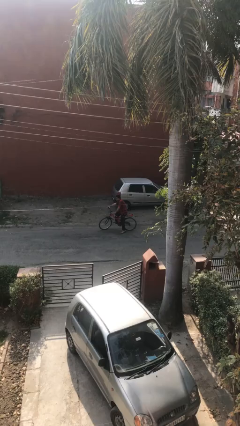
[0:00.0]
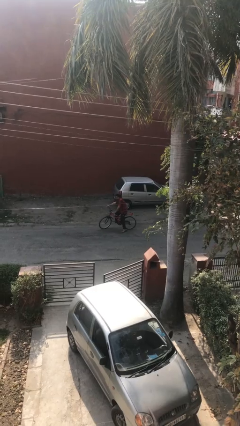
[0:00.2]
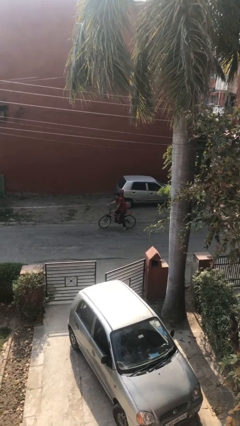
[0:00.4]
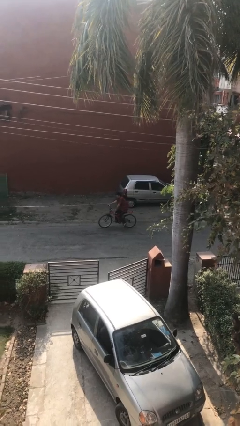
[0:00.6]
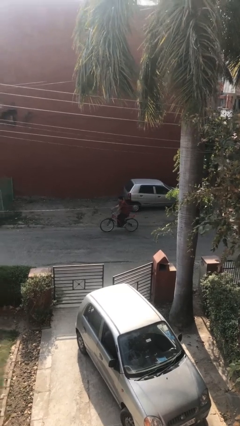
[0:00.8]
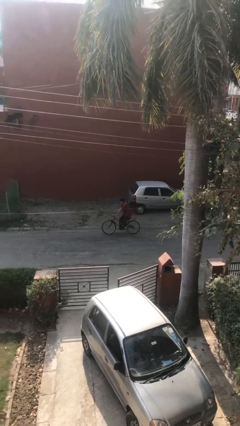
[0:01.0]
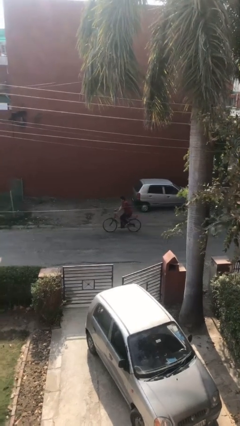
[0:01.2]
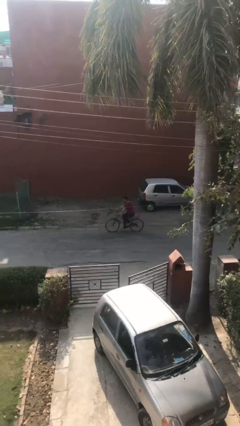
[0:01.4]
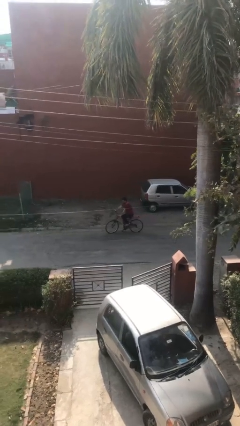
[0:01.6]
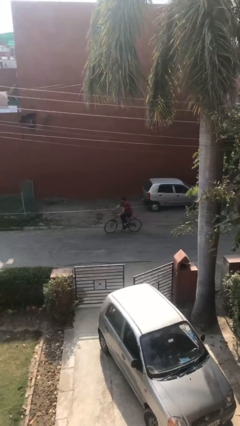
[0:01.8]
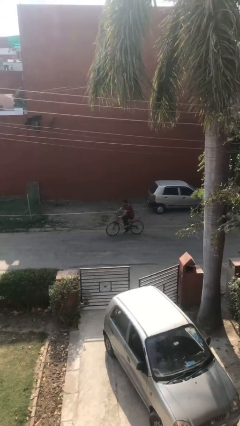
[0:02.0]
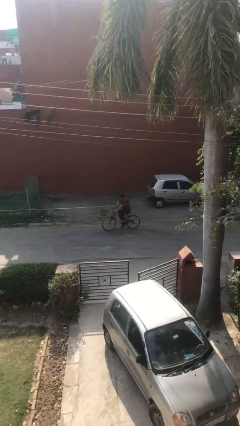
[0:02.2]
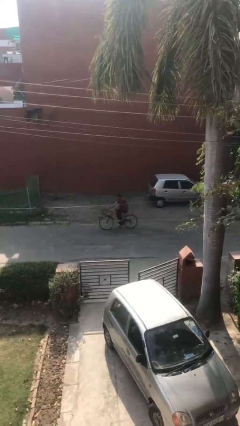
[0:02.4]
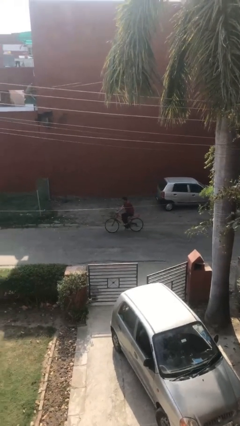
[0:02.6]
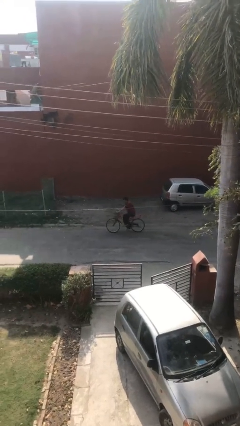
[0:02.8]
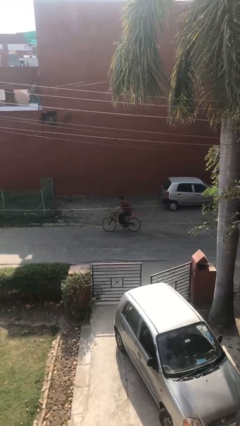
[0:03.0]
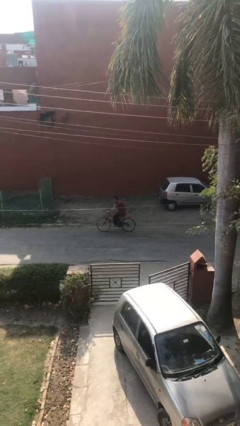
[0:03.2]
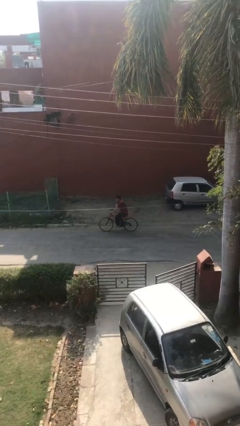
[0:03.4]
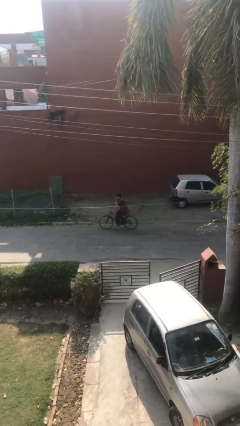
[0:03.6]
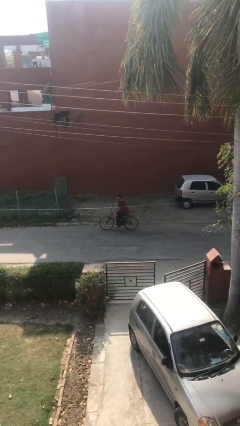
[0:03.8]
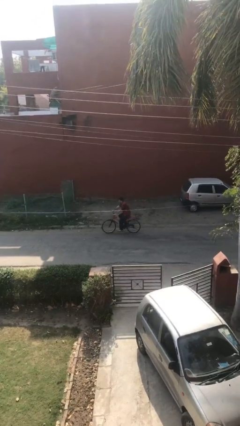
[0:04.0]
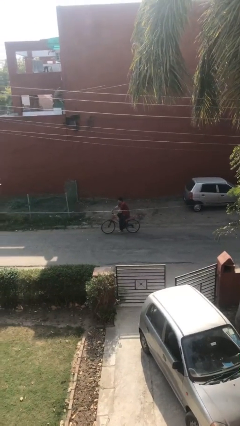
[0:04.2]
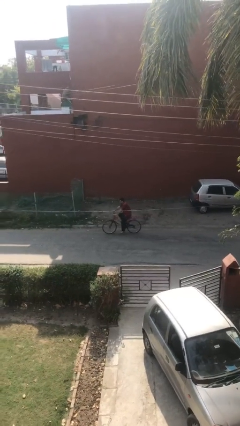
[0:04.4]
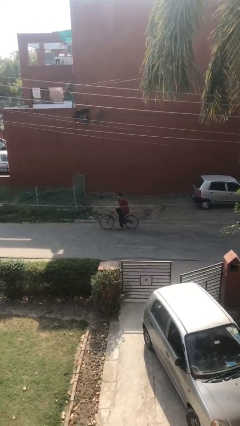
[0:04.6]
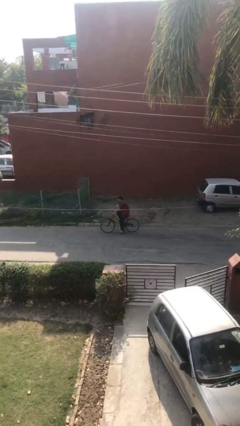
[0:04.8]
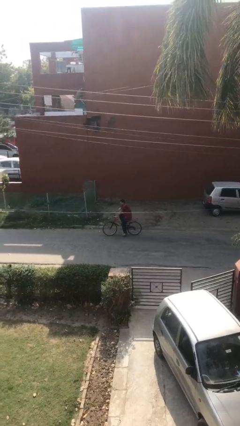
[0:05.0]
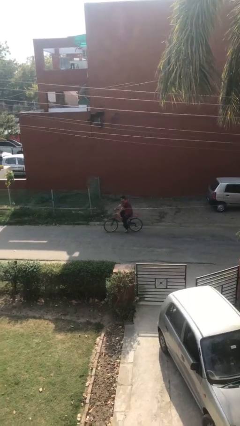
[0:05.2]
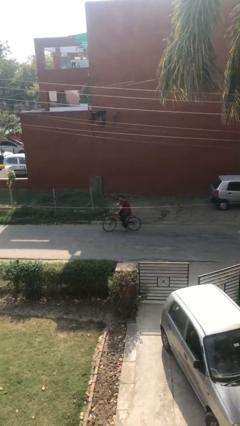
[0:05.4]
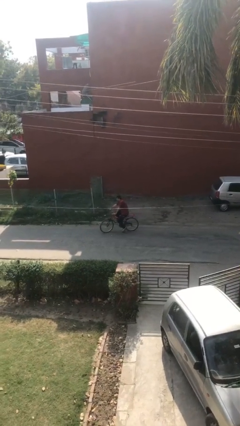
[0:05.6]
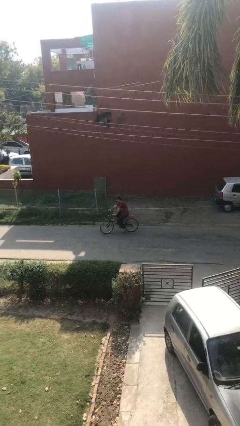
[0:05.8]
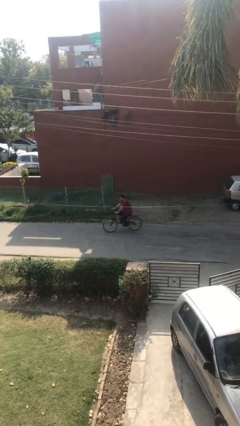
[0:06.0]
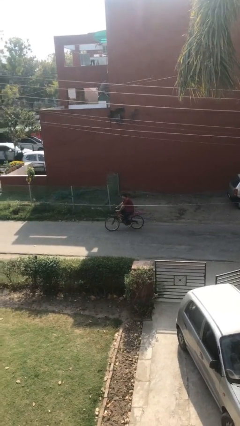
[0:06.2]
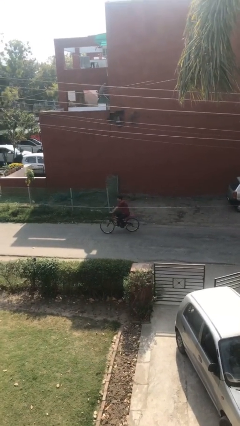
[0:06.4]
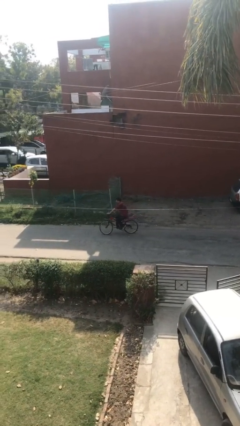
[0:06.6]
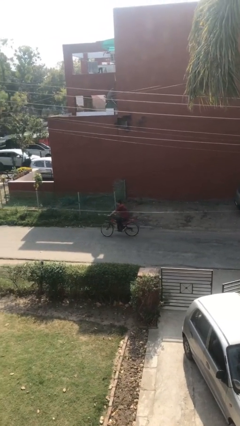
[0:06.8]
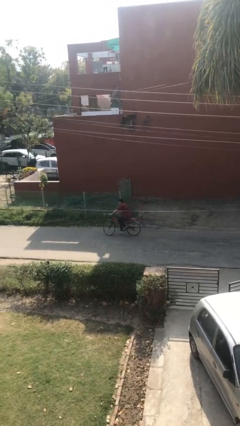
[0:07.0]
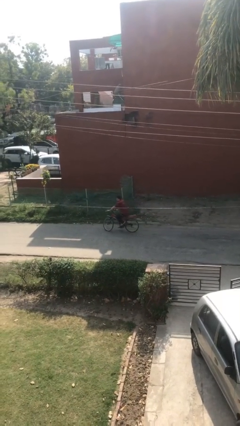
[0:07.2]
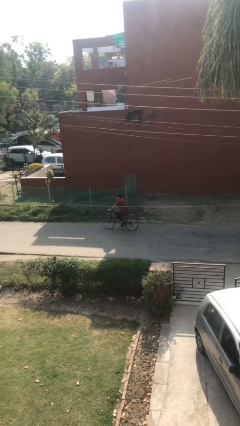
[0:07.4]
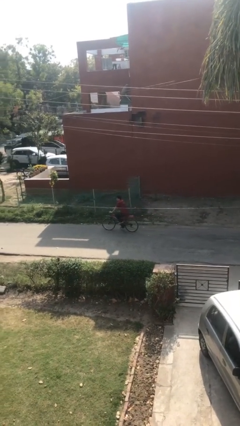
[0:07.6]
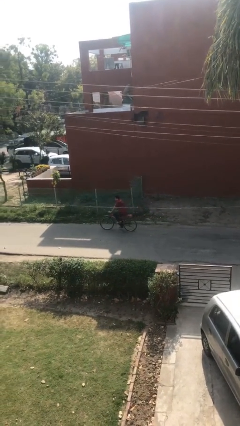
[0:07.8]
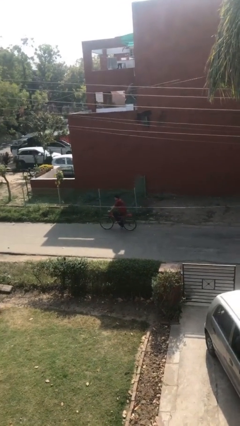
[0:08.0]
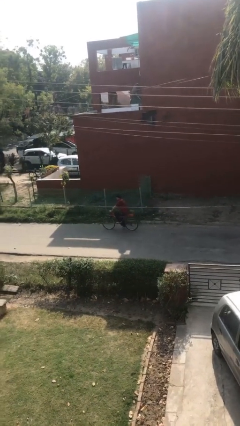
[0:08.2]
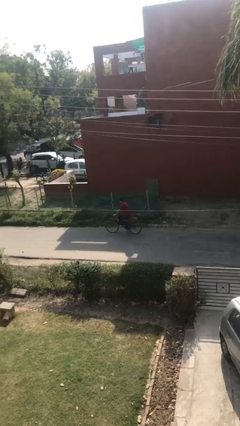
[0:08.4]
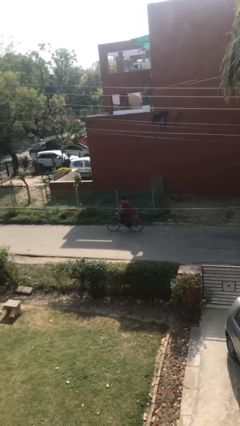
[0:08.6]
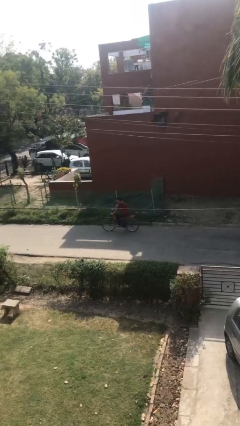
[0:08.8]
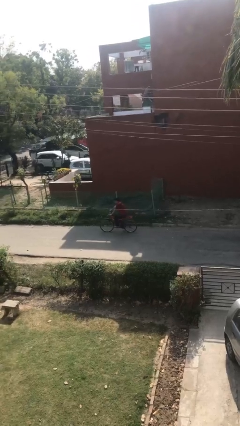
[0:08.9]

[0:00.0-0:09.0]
person rides bicycle

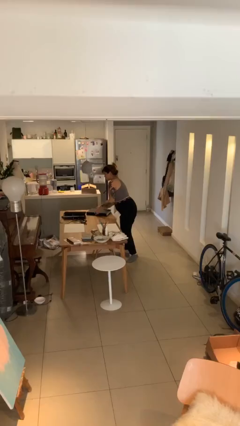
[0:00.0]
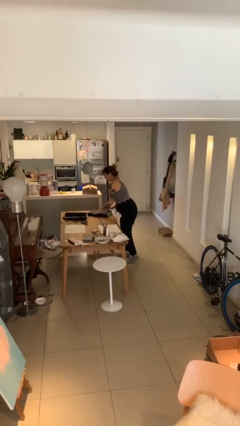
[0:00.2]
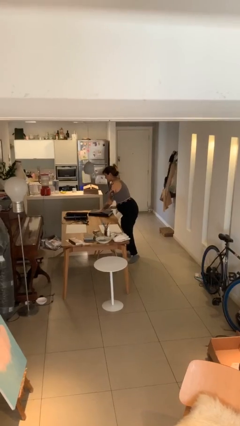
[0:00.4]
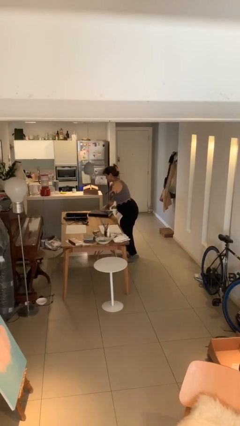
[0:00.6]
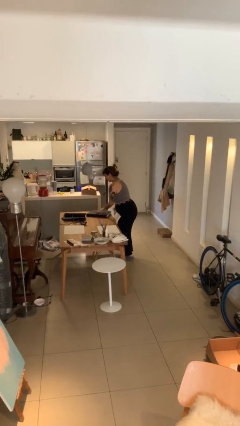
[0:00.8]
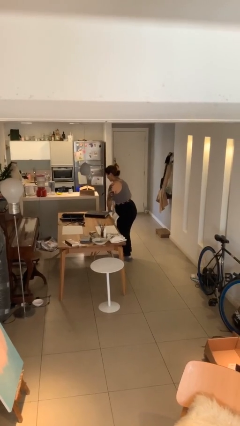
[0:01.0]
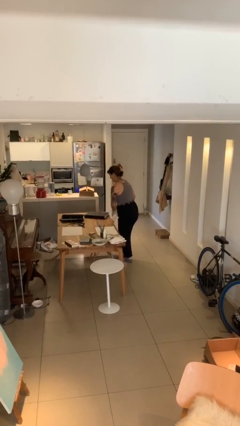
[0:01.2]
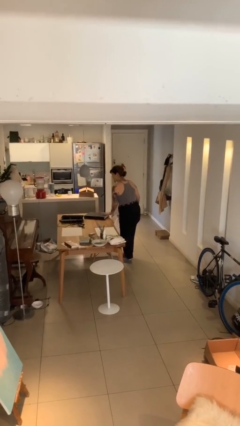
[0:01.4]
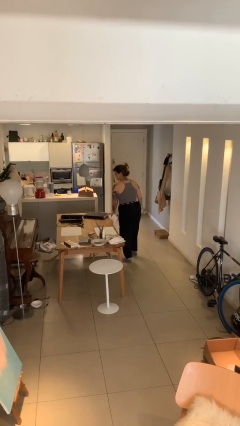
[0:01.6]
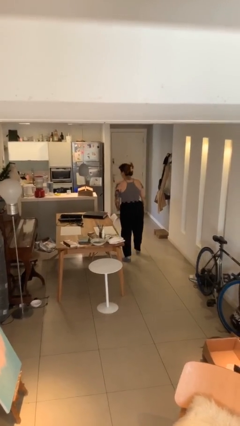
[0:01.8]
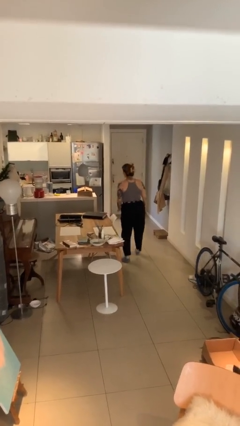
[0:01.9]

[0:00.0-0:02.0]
person puts down object on table

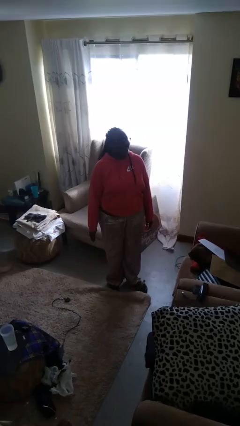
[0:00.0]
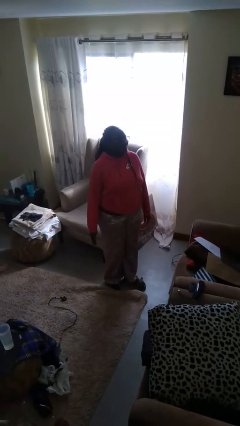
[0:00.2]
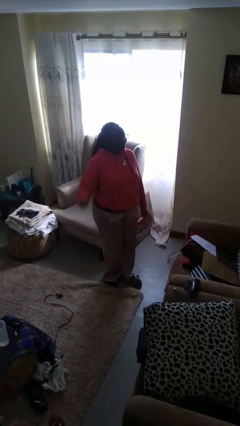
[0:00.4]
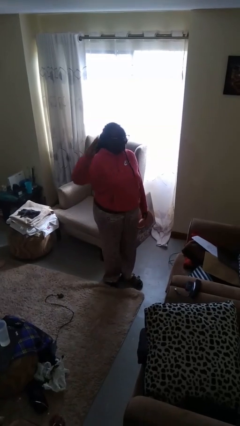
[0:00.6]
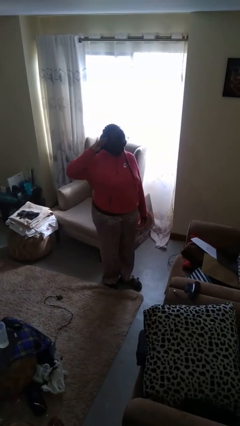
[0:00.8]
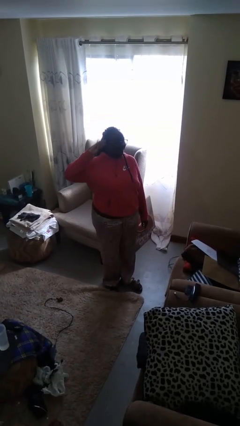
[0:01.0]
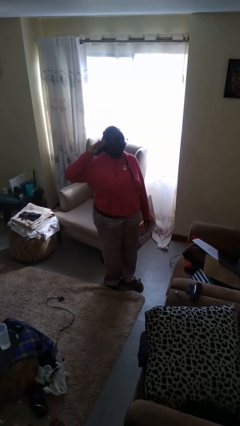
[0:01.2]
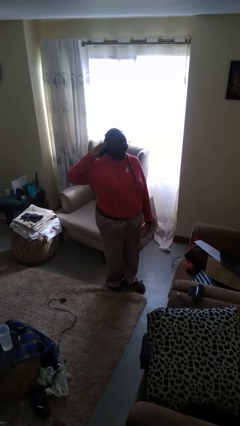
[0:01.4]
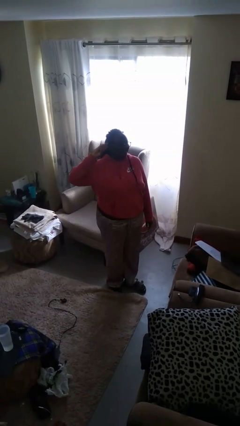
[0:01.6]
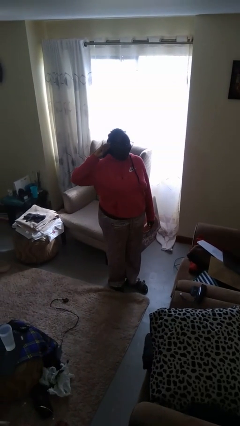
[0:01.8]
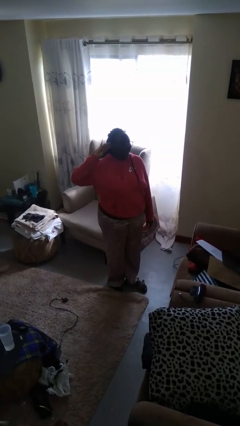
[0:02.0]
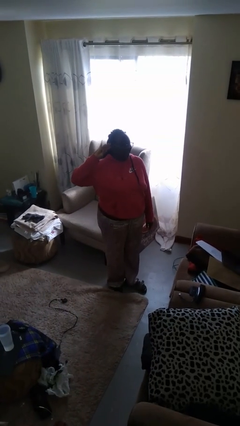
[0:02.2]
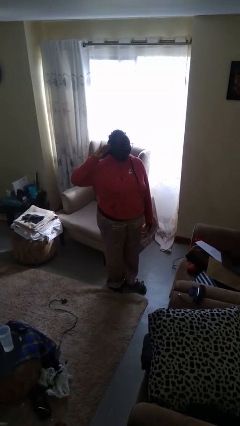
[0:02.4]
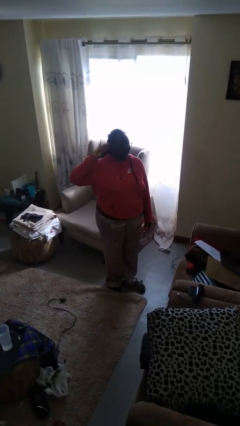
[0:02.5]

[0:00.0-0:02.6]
person salutes

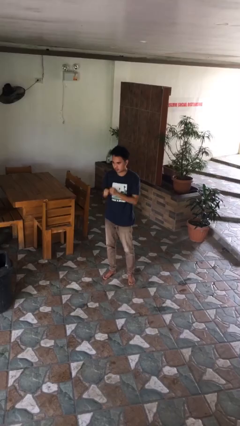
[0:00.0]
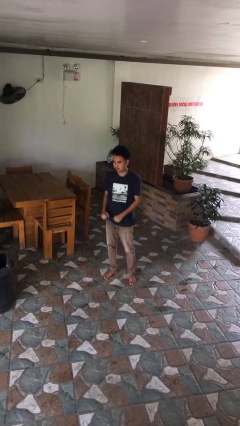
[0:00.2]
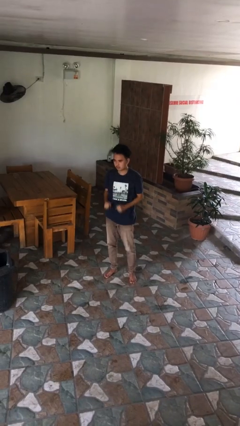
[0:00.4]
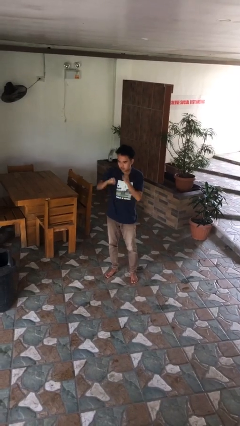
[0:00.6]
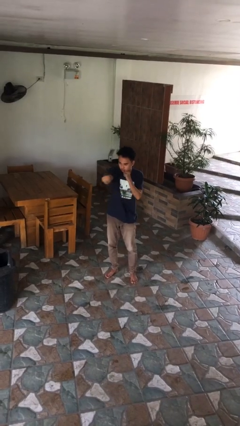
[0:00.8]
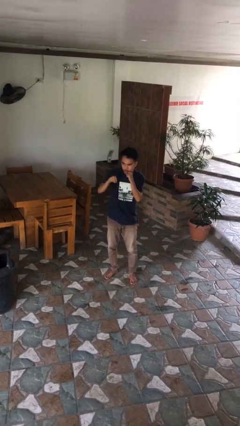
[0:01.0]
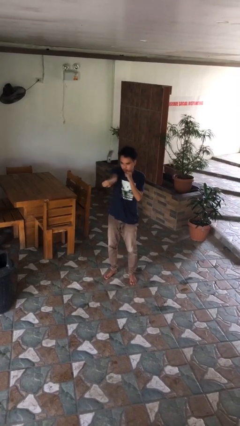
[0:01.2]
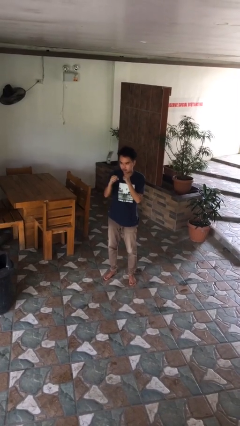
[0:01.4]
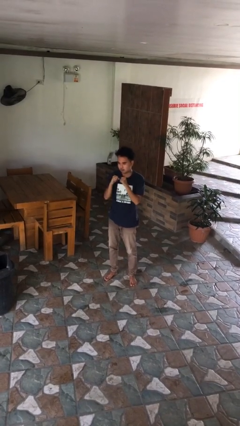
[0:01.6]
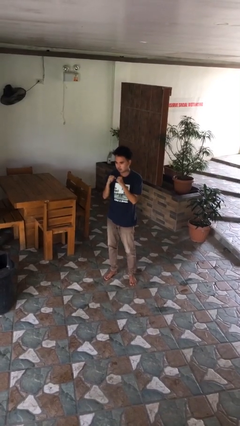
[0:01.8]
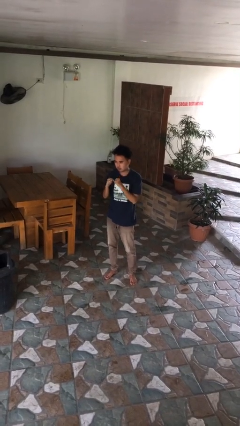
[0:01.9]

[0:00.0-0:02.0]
person punches

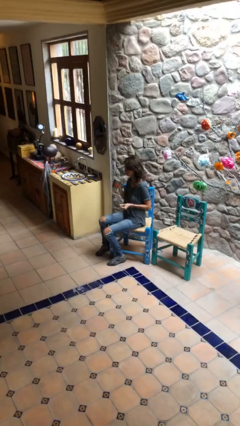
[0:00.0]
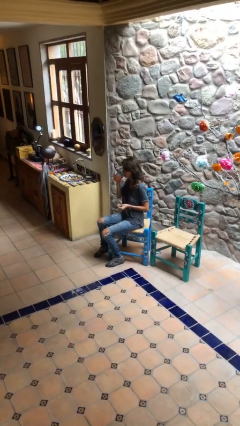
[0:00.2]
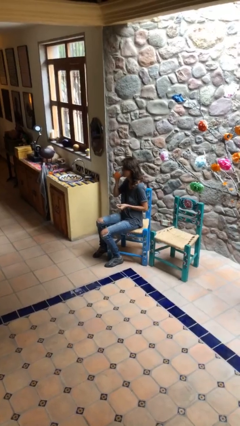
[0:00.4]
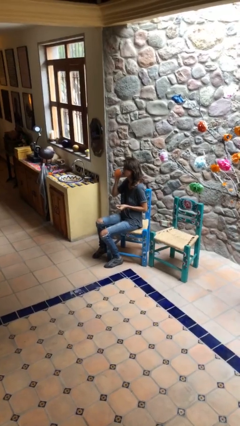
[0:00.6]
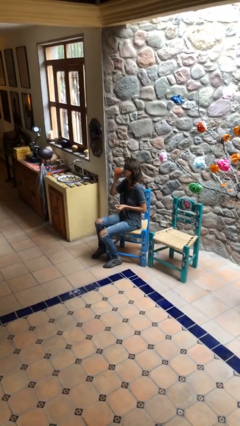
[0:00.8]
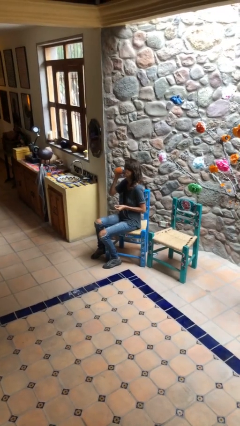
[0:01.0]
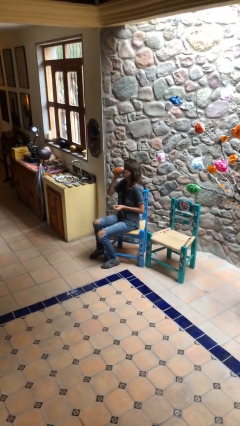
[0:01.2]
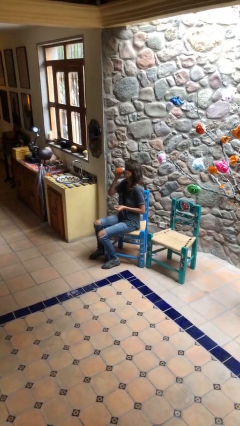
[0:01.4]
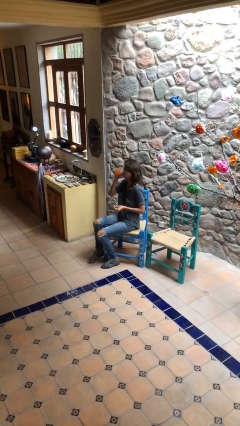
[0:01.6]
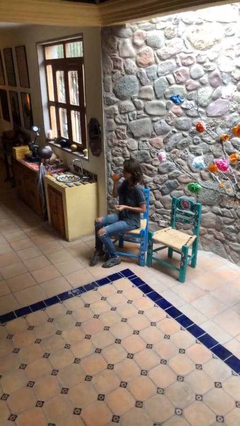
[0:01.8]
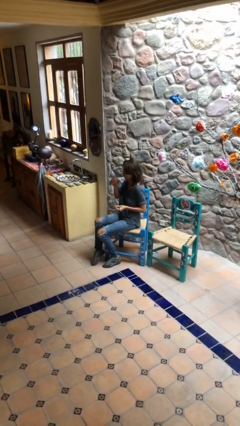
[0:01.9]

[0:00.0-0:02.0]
person drinks from mug
